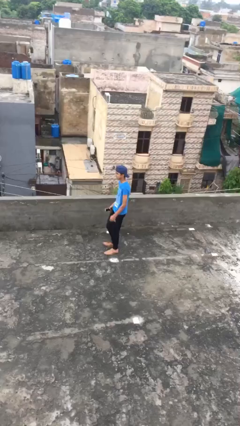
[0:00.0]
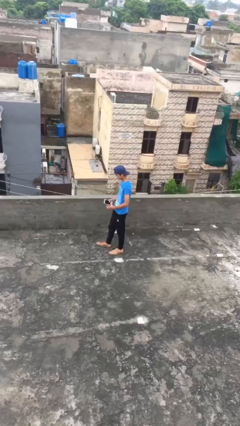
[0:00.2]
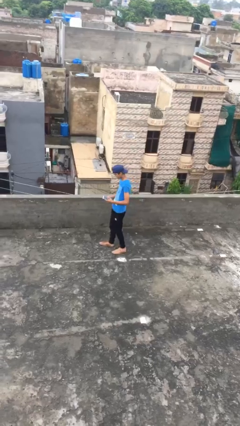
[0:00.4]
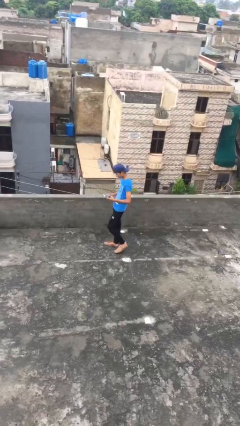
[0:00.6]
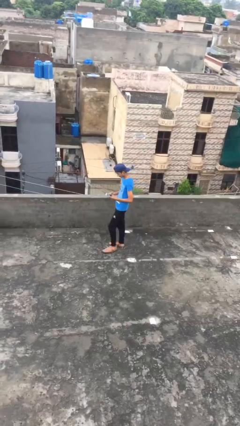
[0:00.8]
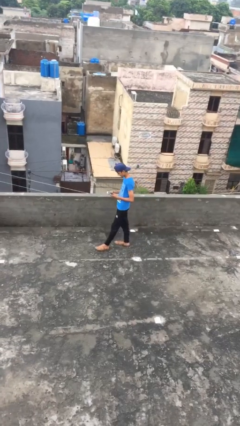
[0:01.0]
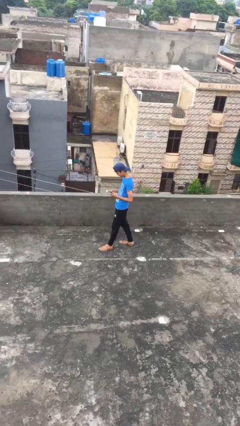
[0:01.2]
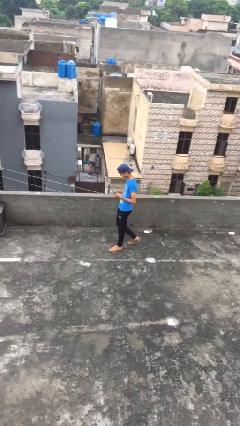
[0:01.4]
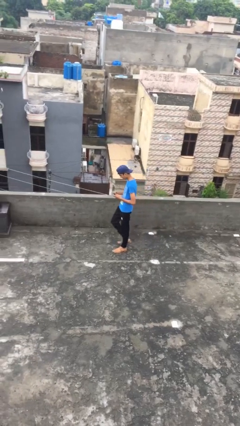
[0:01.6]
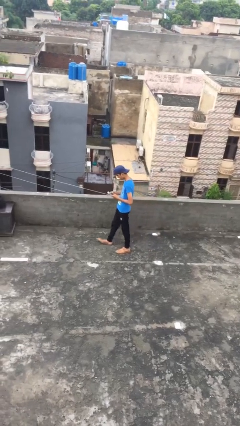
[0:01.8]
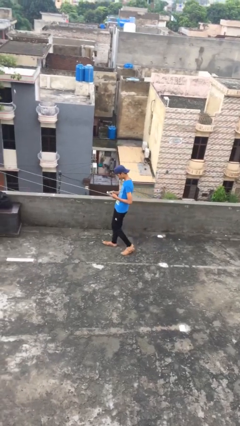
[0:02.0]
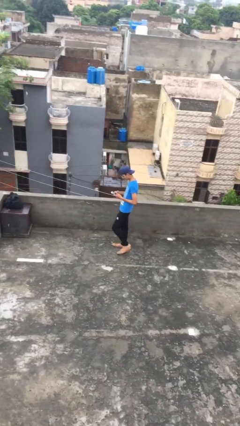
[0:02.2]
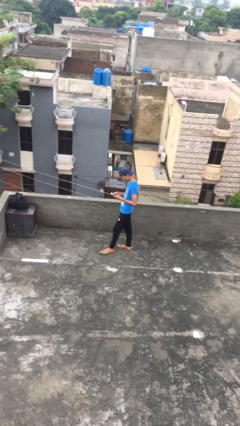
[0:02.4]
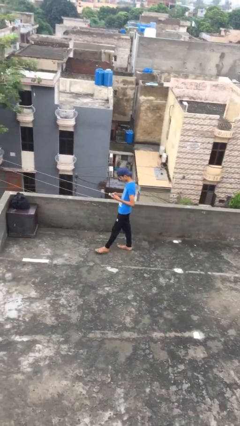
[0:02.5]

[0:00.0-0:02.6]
person texts on phone

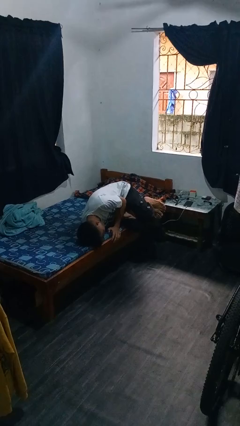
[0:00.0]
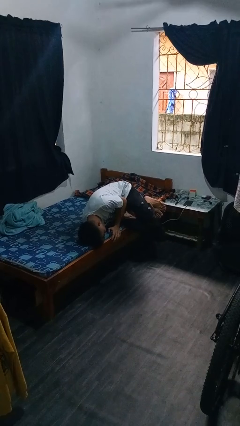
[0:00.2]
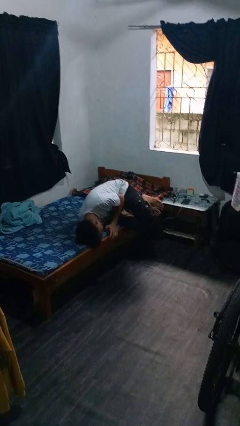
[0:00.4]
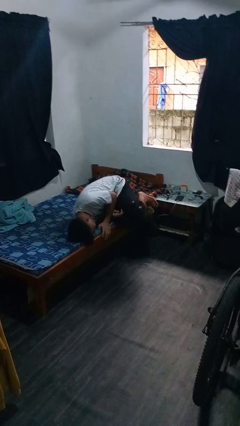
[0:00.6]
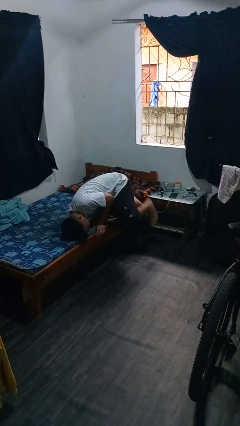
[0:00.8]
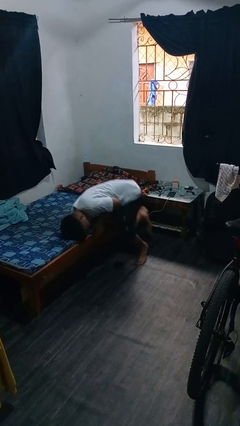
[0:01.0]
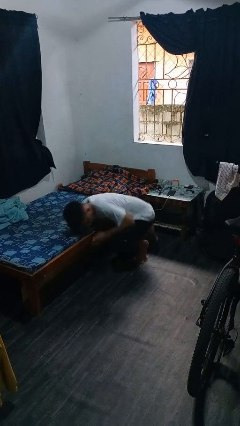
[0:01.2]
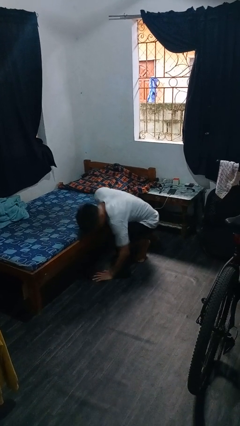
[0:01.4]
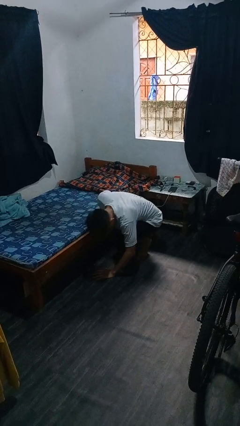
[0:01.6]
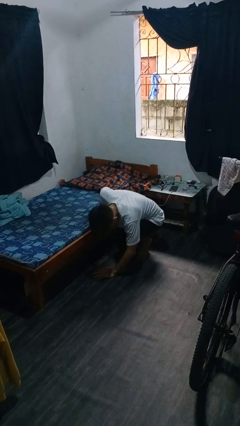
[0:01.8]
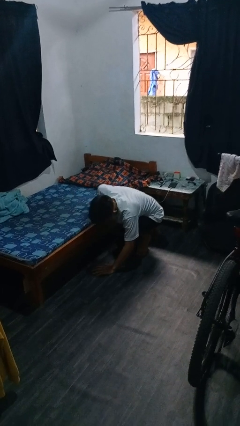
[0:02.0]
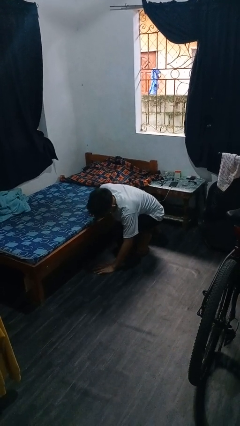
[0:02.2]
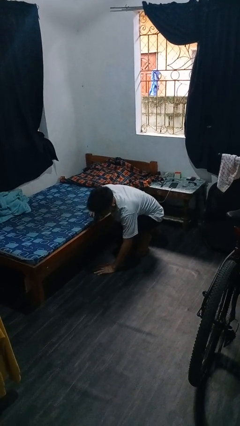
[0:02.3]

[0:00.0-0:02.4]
person falls from bed

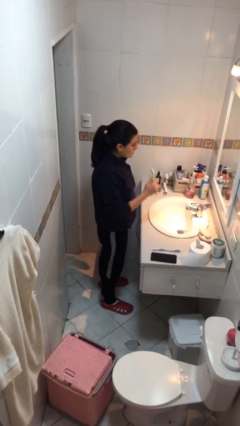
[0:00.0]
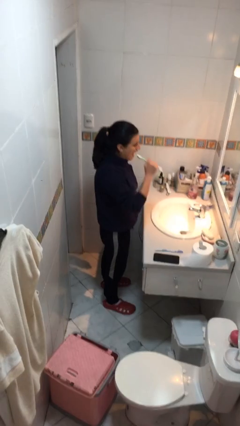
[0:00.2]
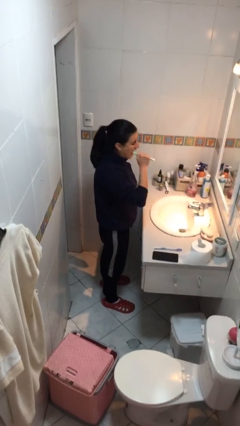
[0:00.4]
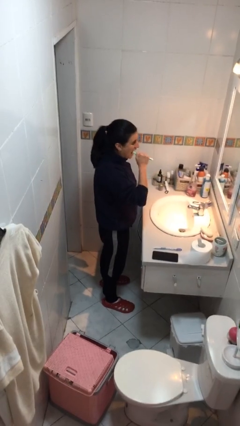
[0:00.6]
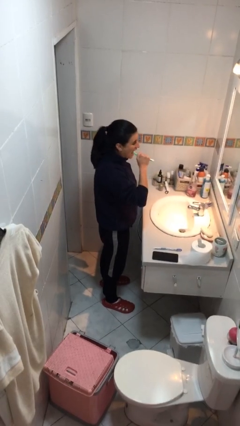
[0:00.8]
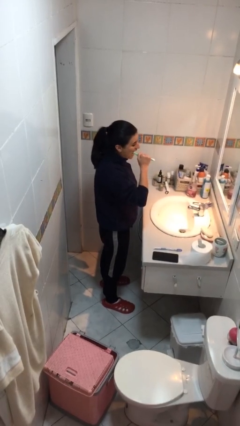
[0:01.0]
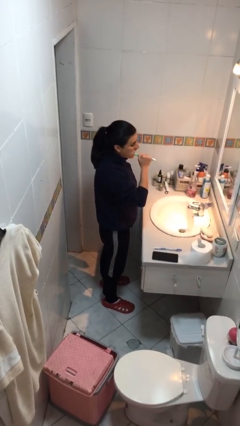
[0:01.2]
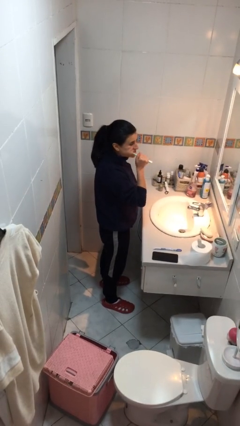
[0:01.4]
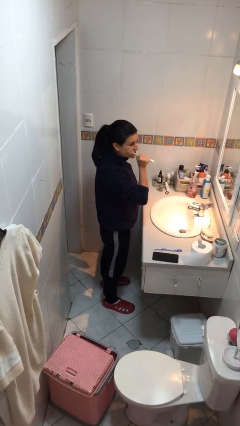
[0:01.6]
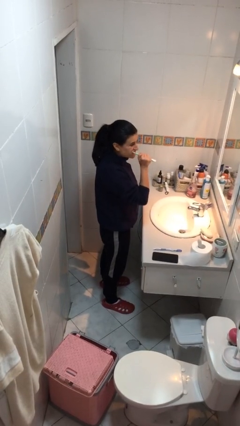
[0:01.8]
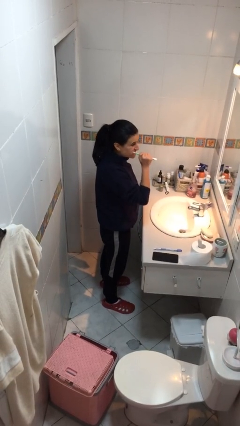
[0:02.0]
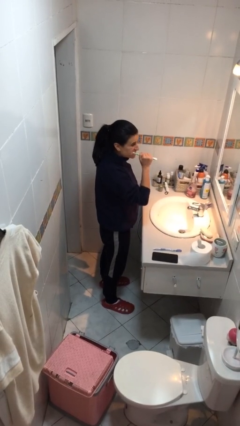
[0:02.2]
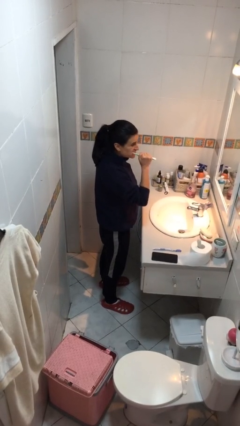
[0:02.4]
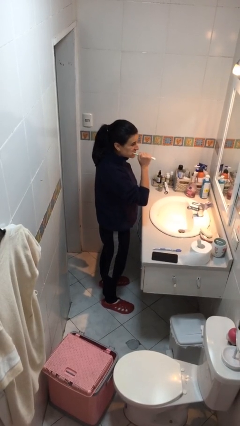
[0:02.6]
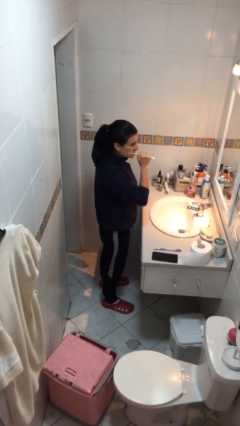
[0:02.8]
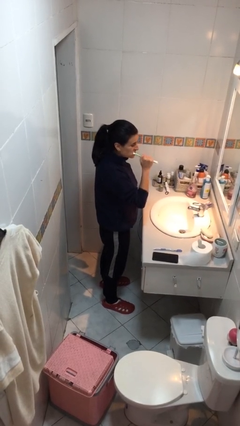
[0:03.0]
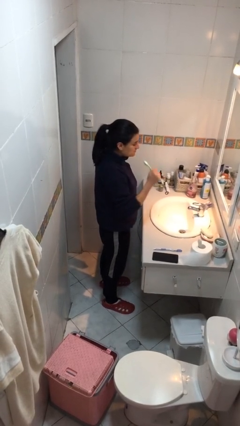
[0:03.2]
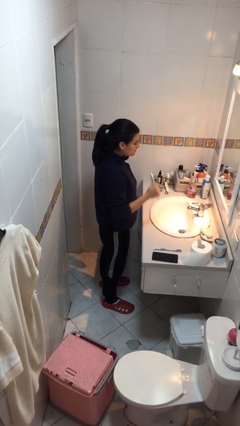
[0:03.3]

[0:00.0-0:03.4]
person brushes teeth

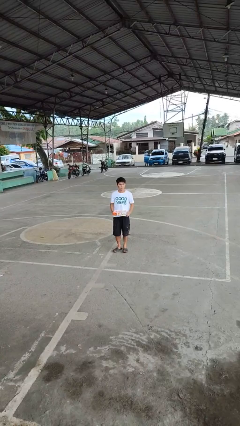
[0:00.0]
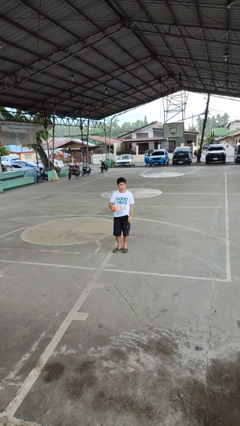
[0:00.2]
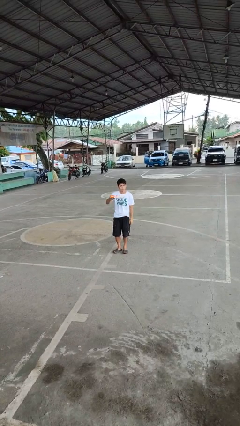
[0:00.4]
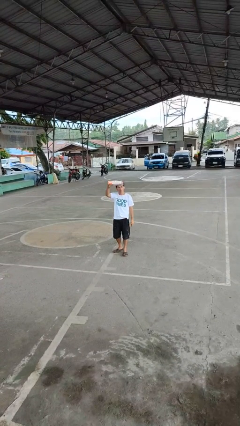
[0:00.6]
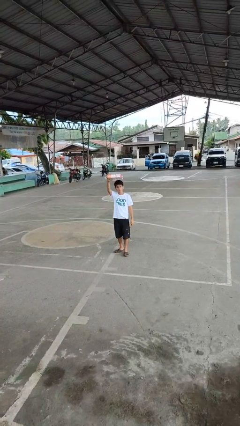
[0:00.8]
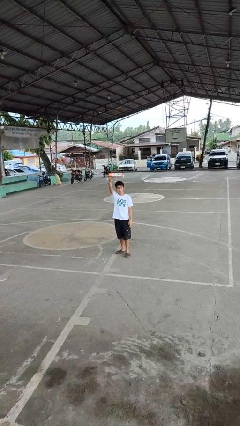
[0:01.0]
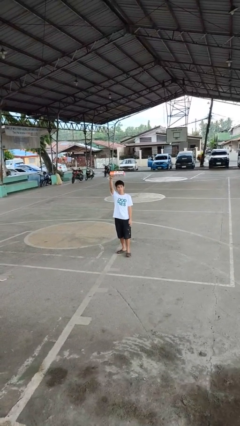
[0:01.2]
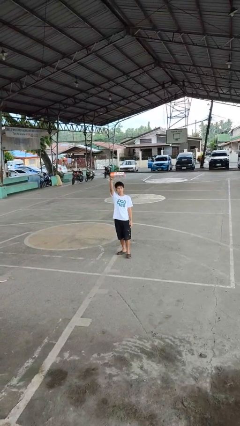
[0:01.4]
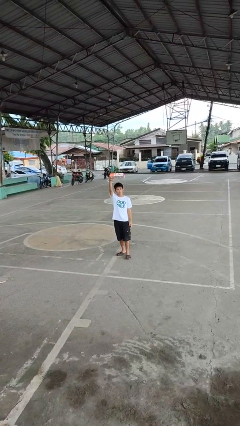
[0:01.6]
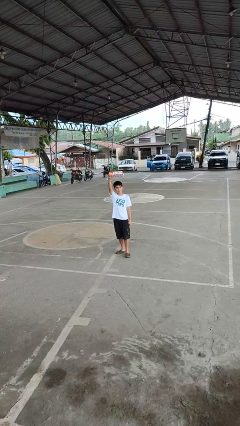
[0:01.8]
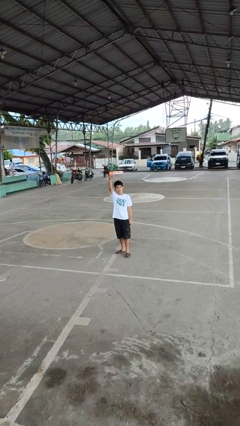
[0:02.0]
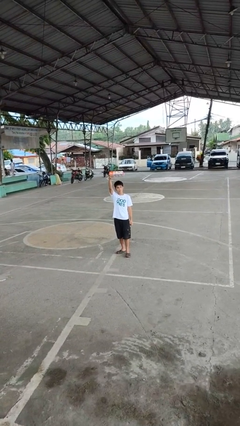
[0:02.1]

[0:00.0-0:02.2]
person holds object above head

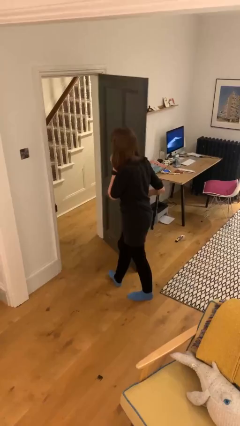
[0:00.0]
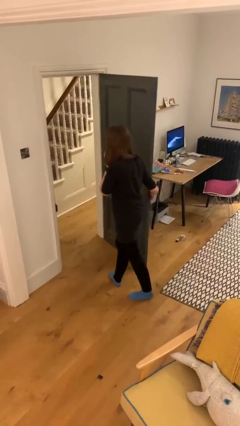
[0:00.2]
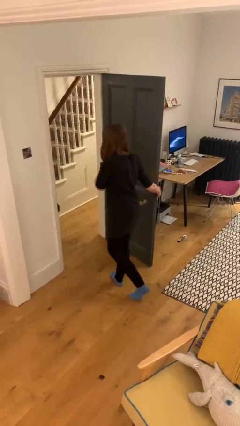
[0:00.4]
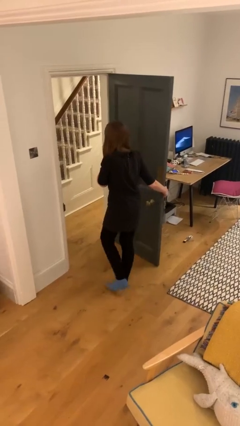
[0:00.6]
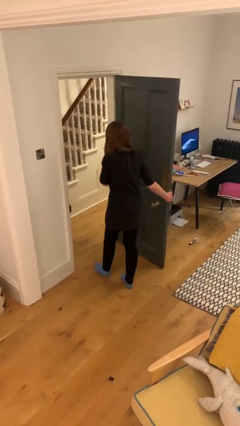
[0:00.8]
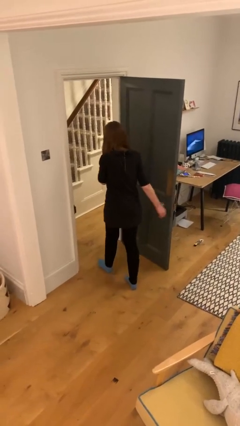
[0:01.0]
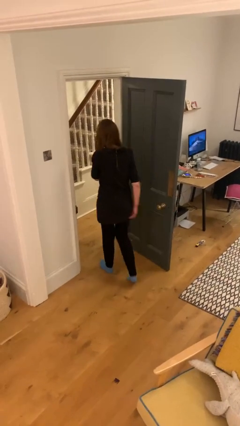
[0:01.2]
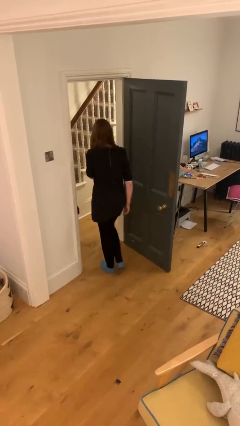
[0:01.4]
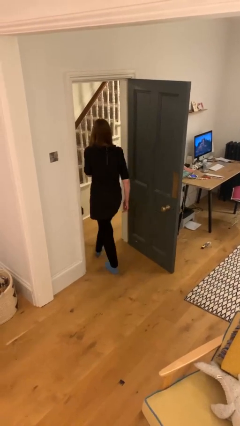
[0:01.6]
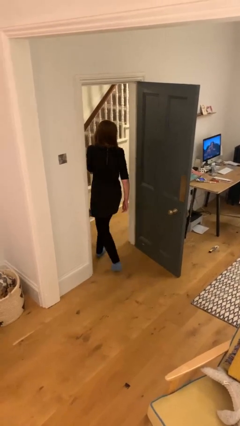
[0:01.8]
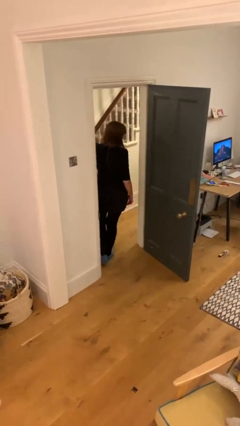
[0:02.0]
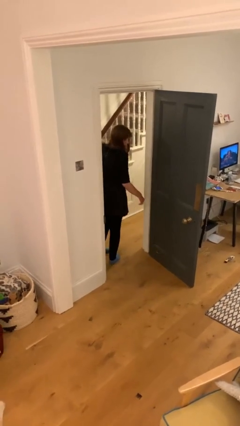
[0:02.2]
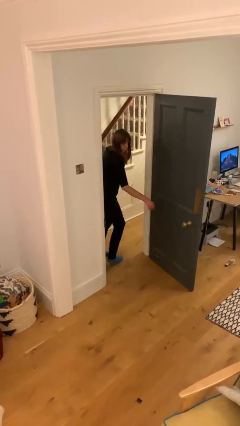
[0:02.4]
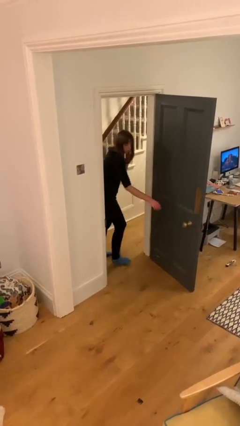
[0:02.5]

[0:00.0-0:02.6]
person exits scene through structure

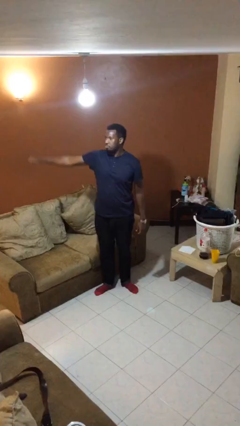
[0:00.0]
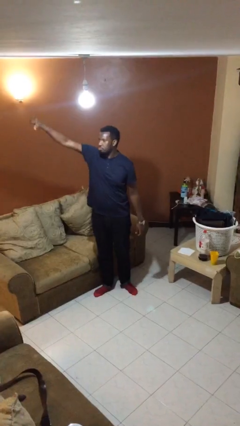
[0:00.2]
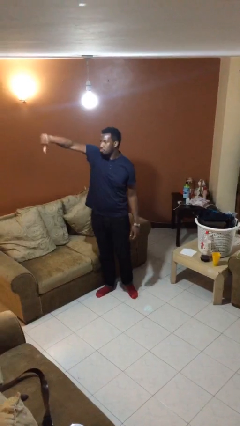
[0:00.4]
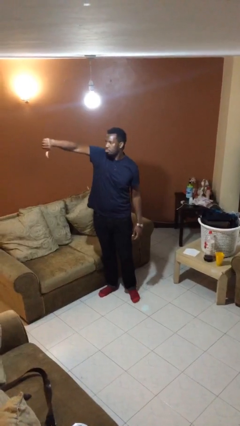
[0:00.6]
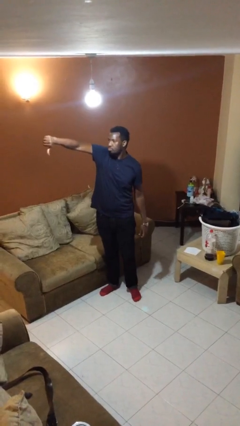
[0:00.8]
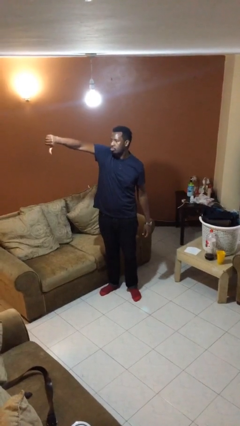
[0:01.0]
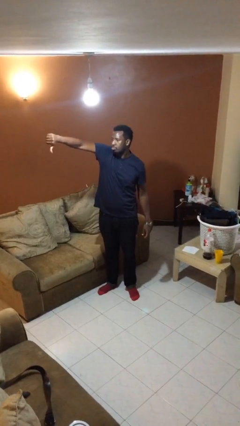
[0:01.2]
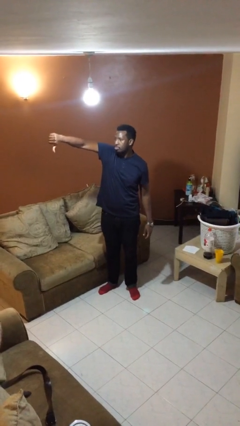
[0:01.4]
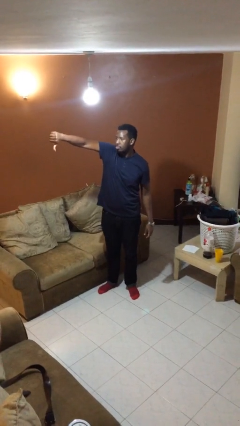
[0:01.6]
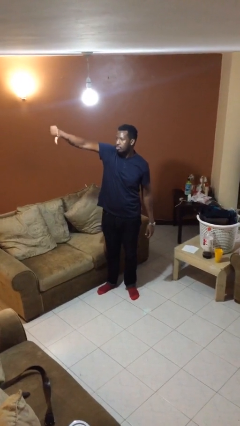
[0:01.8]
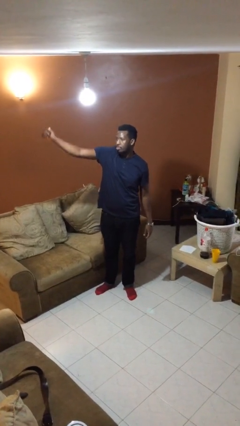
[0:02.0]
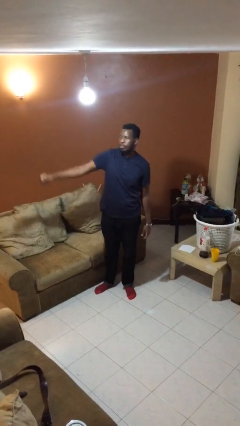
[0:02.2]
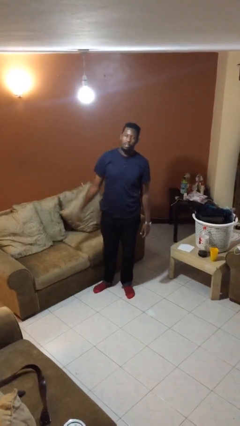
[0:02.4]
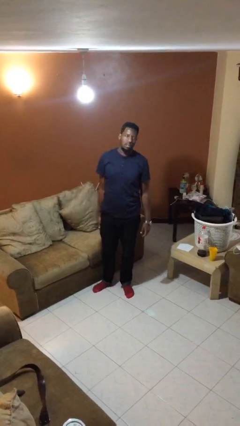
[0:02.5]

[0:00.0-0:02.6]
person gestures thumbs down

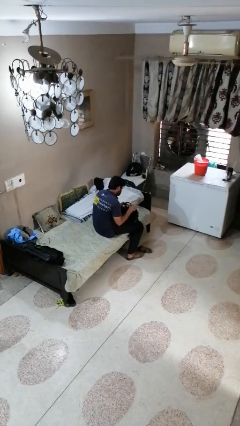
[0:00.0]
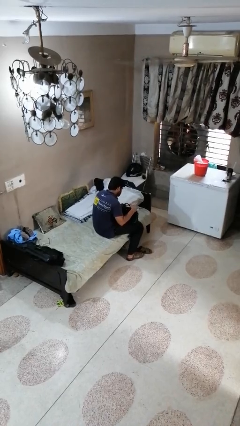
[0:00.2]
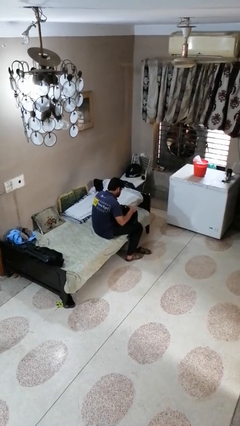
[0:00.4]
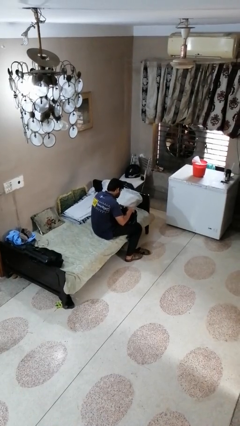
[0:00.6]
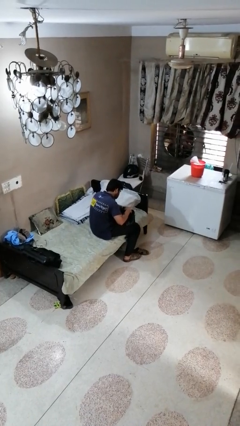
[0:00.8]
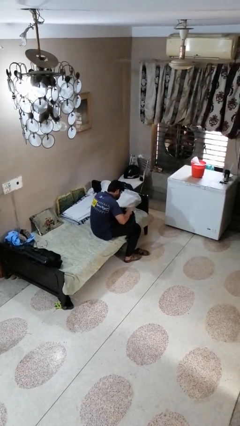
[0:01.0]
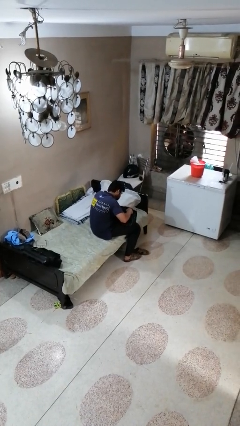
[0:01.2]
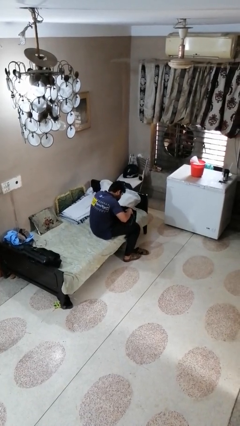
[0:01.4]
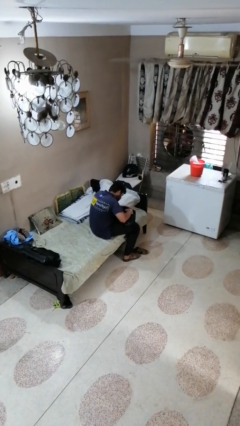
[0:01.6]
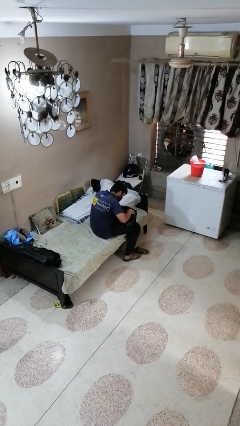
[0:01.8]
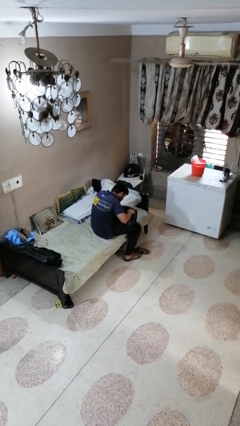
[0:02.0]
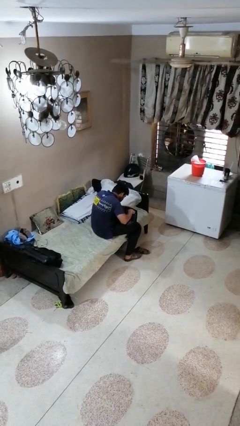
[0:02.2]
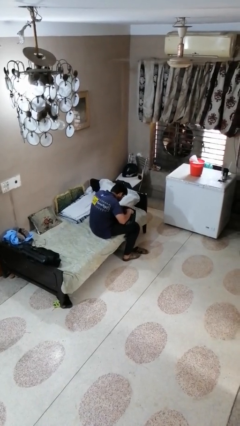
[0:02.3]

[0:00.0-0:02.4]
person searches in purse
